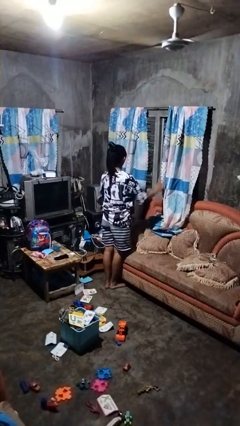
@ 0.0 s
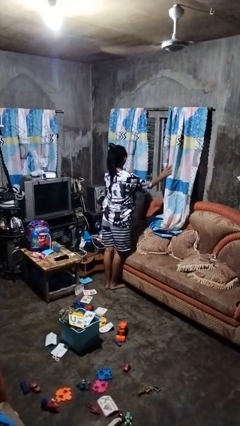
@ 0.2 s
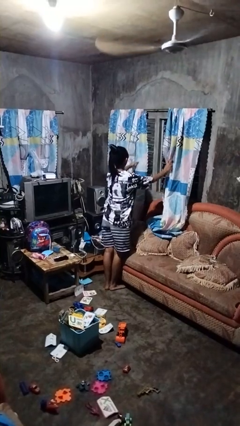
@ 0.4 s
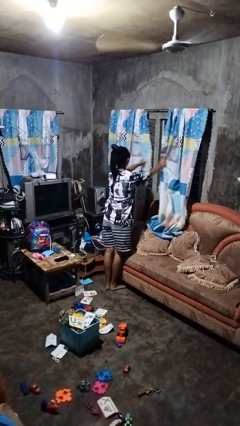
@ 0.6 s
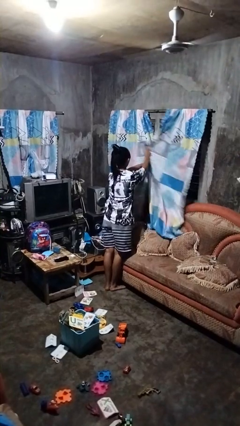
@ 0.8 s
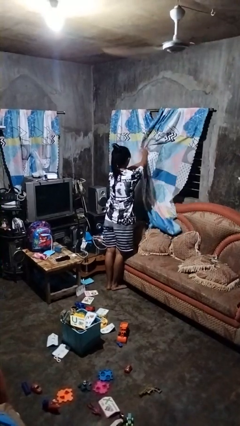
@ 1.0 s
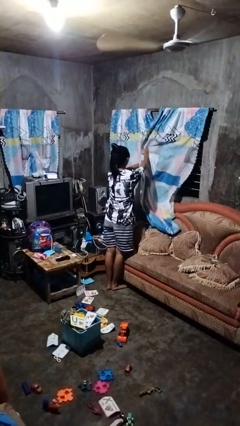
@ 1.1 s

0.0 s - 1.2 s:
person closes curtains

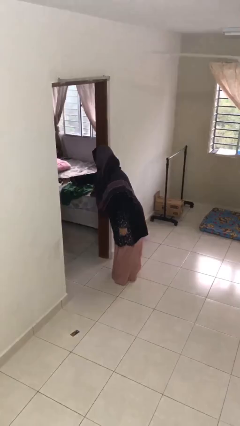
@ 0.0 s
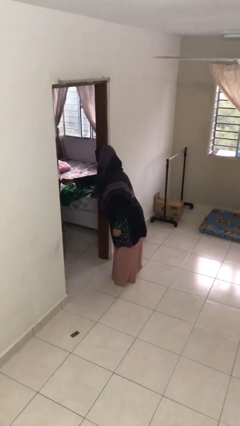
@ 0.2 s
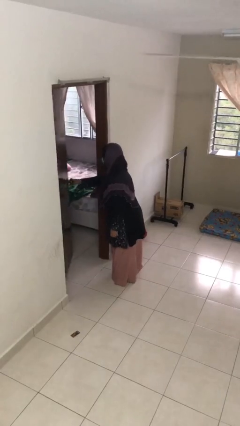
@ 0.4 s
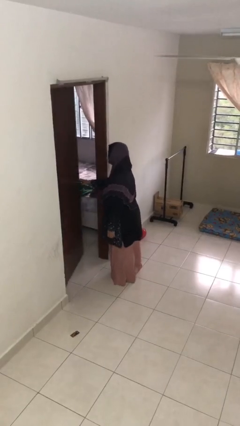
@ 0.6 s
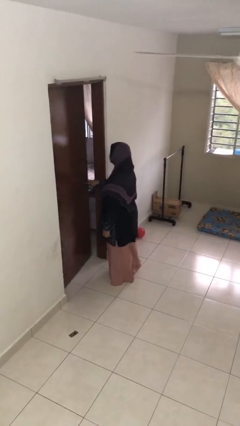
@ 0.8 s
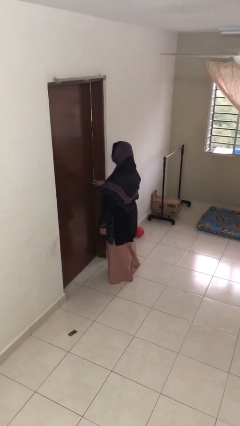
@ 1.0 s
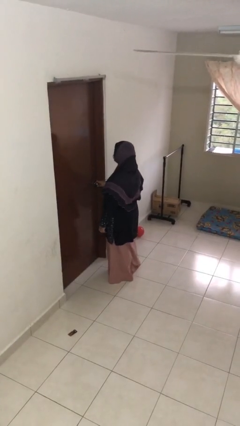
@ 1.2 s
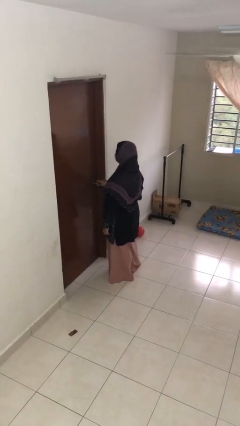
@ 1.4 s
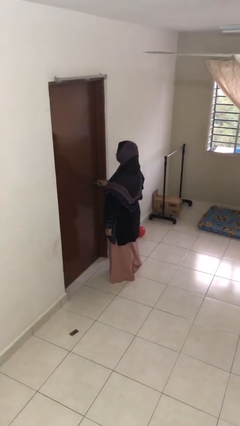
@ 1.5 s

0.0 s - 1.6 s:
person closes facility door

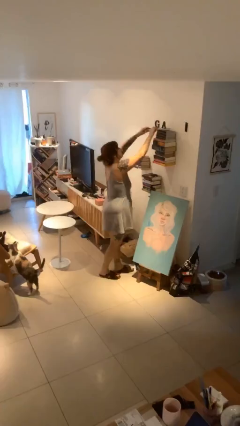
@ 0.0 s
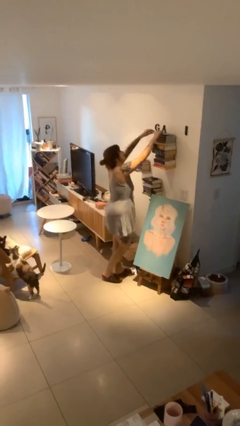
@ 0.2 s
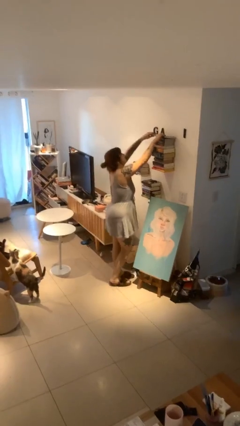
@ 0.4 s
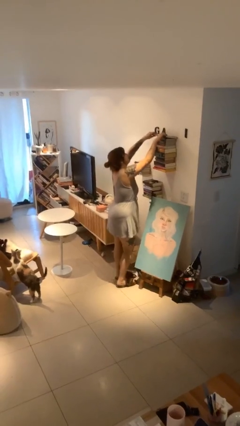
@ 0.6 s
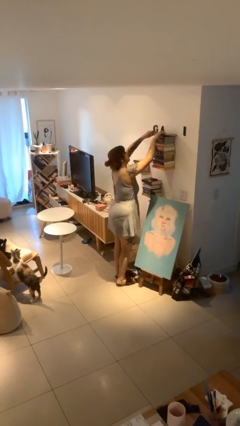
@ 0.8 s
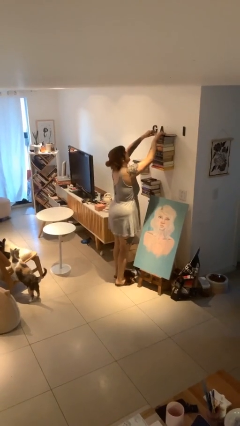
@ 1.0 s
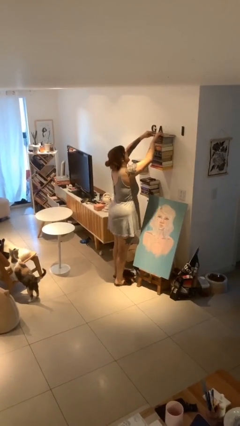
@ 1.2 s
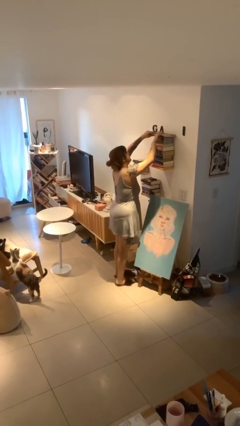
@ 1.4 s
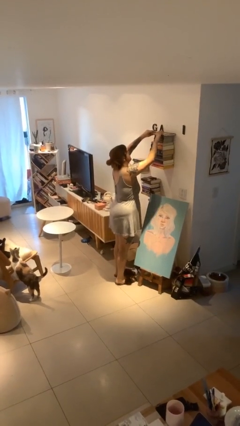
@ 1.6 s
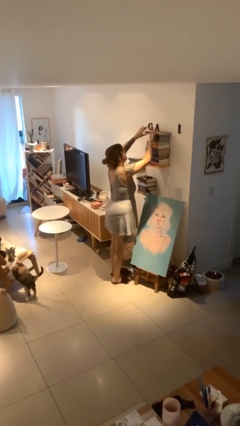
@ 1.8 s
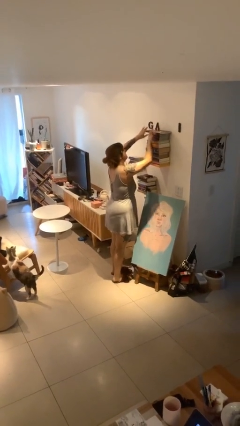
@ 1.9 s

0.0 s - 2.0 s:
person puts down object on shelf

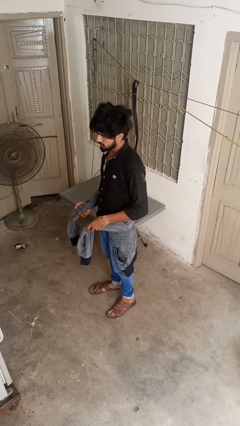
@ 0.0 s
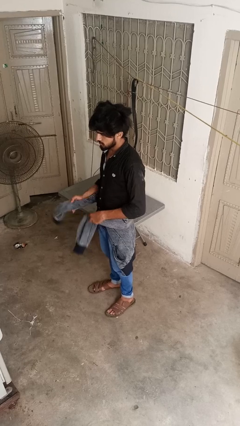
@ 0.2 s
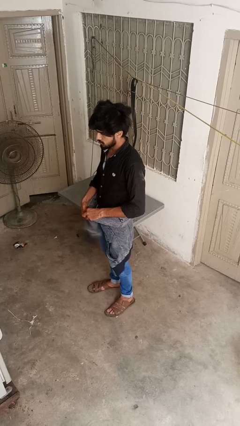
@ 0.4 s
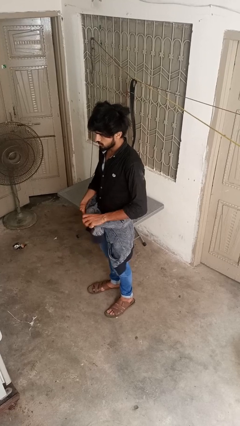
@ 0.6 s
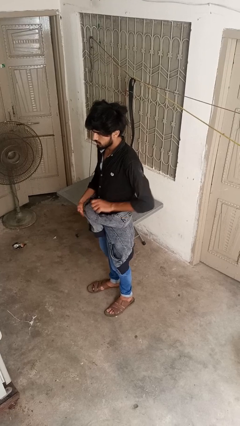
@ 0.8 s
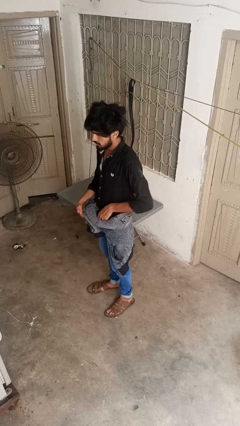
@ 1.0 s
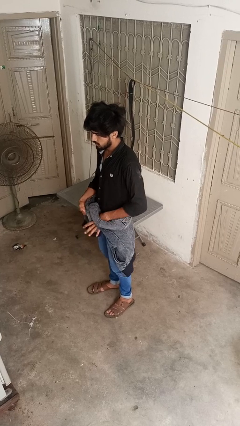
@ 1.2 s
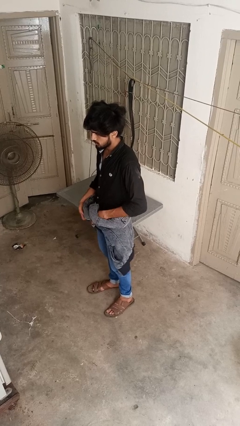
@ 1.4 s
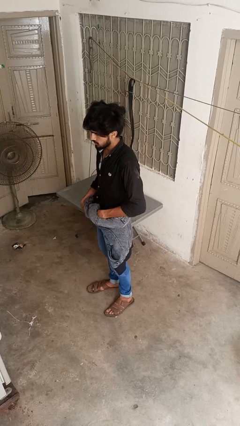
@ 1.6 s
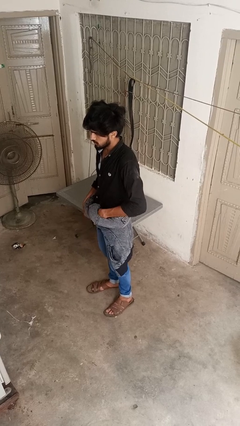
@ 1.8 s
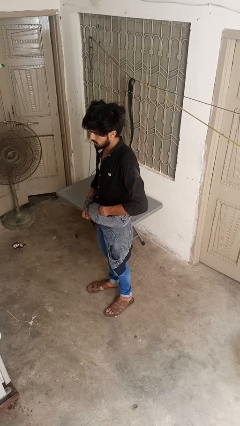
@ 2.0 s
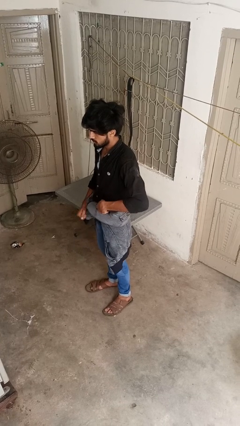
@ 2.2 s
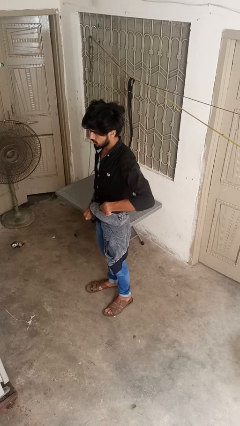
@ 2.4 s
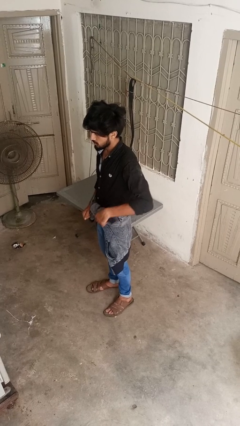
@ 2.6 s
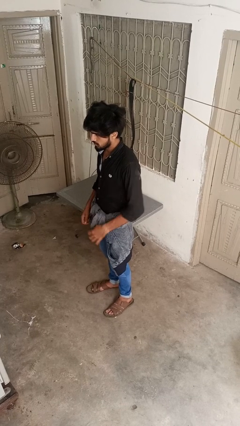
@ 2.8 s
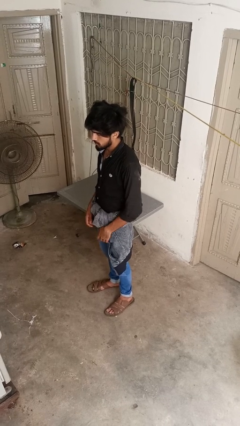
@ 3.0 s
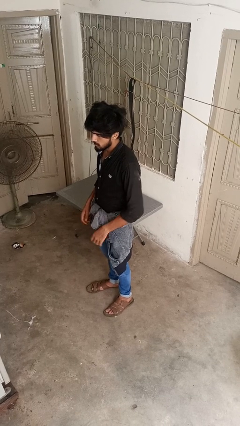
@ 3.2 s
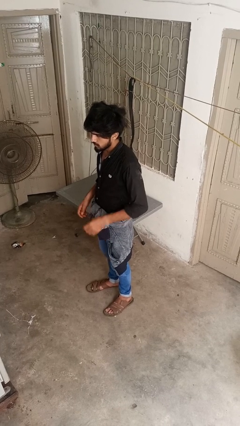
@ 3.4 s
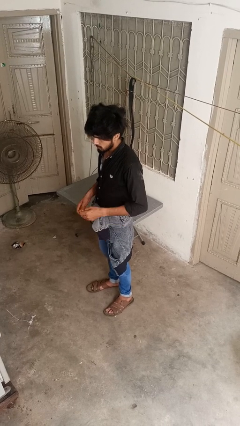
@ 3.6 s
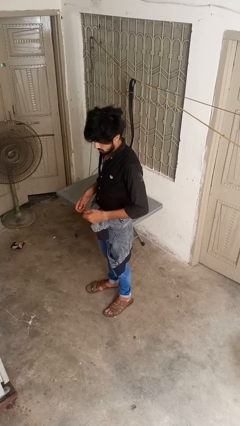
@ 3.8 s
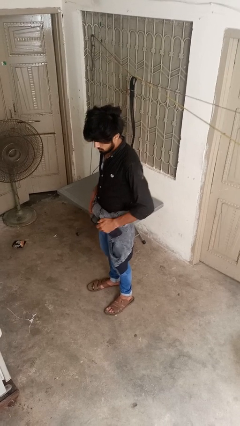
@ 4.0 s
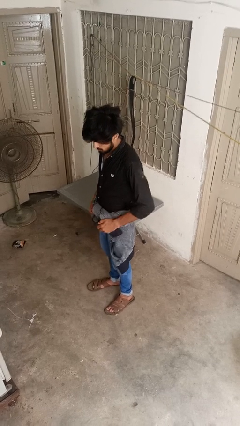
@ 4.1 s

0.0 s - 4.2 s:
person ties jacket around waist

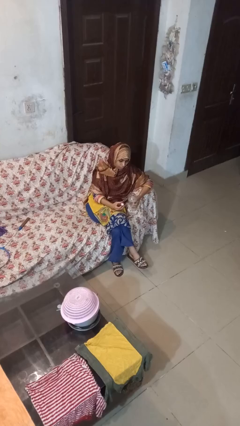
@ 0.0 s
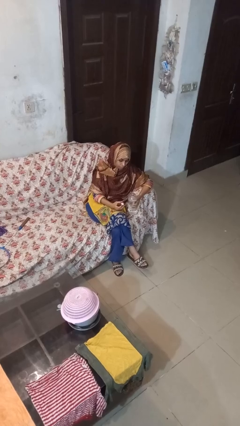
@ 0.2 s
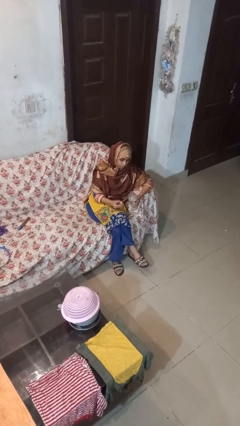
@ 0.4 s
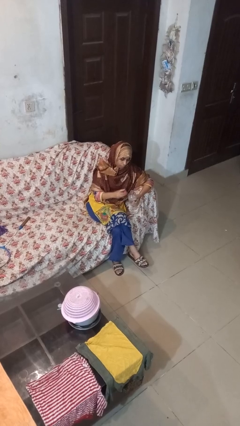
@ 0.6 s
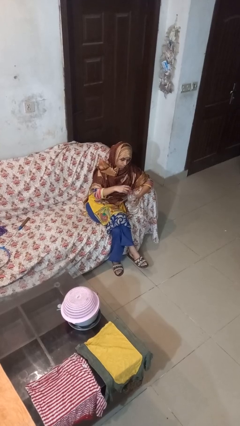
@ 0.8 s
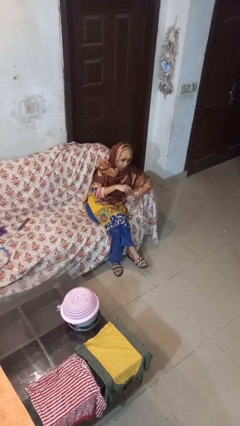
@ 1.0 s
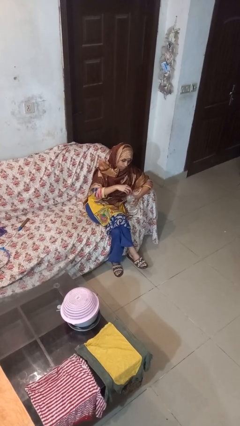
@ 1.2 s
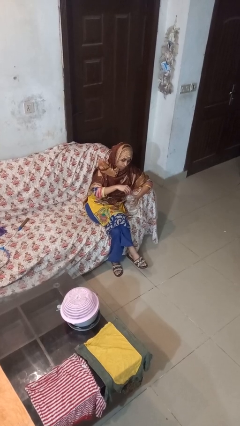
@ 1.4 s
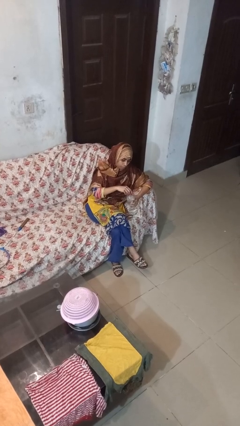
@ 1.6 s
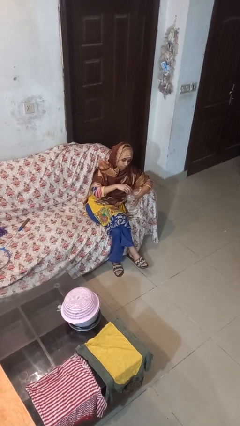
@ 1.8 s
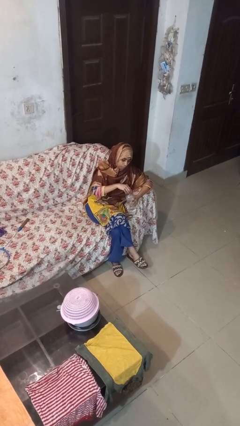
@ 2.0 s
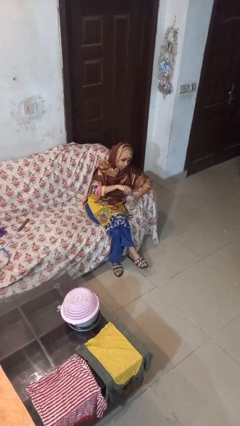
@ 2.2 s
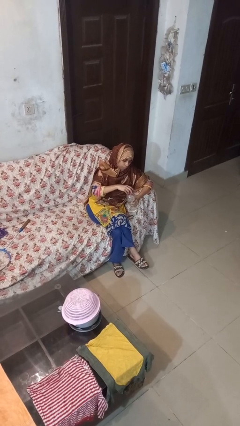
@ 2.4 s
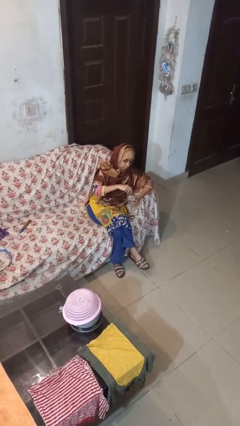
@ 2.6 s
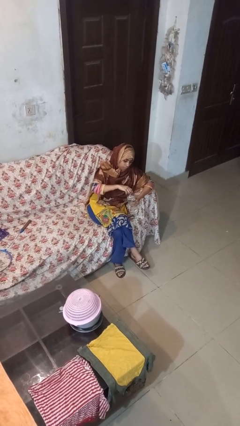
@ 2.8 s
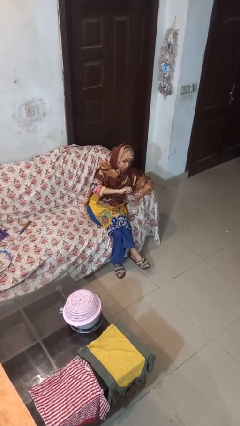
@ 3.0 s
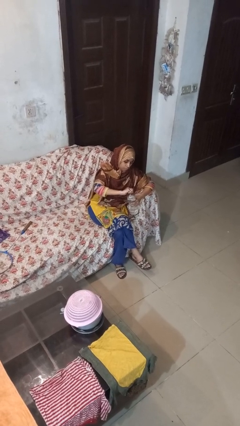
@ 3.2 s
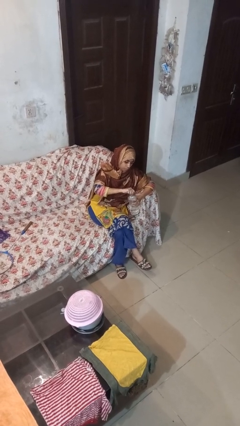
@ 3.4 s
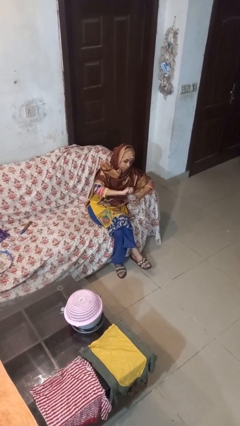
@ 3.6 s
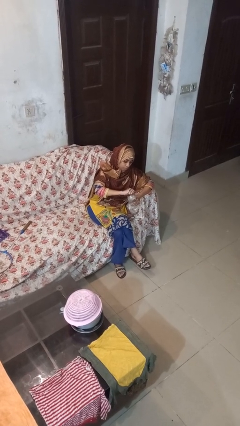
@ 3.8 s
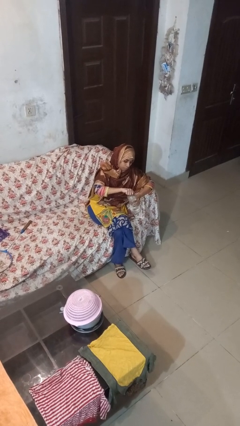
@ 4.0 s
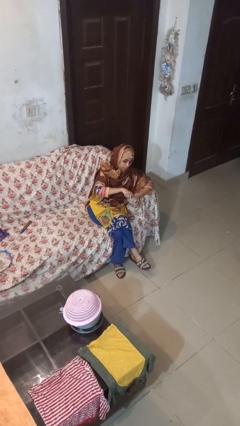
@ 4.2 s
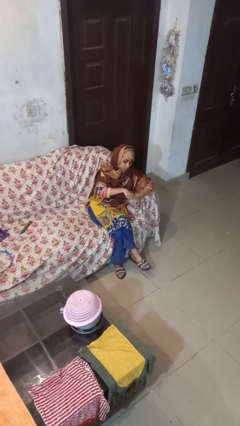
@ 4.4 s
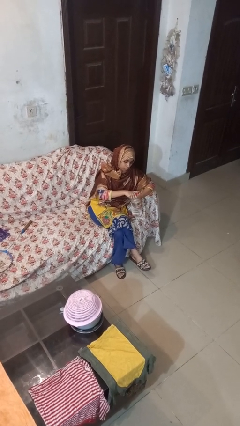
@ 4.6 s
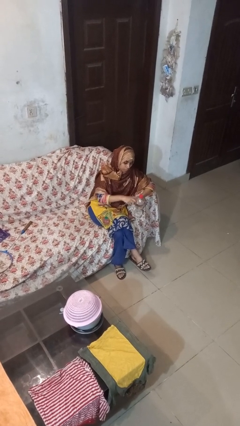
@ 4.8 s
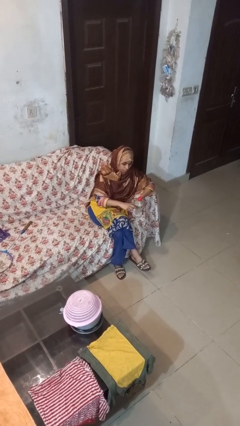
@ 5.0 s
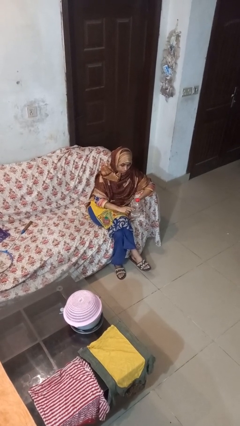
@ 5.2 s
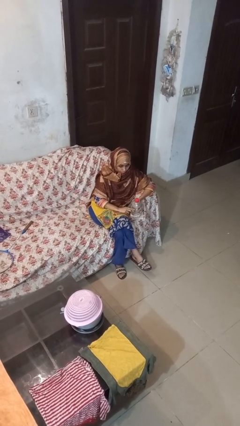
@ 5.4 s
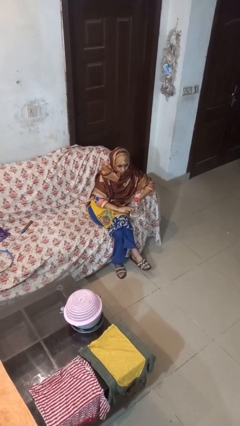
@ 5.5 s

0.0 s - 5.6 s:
person screws lid to bottle

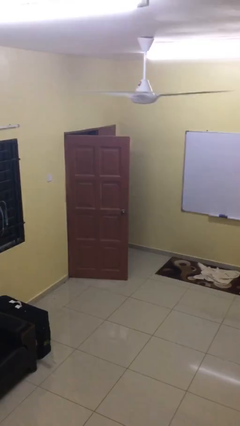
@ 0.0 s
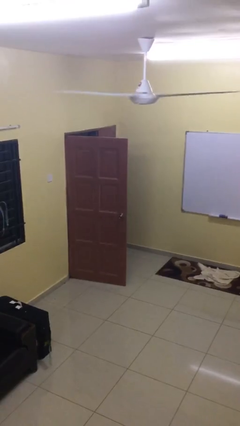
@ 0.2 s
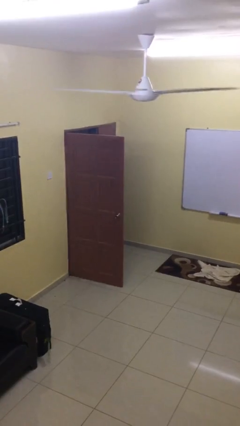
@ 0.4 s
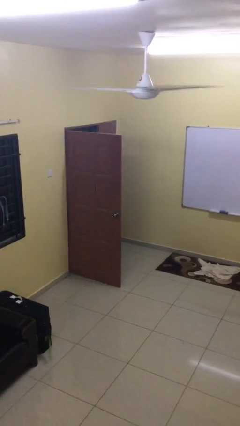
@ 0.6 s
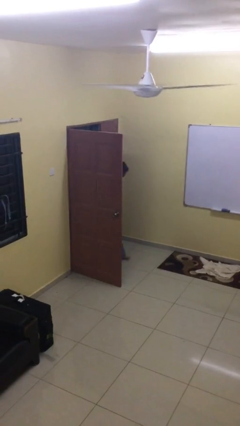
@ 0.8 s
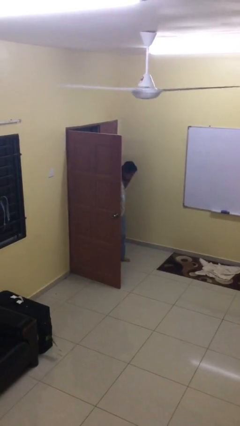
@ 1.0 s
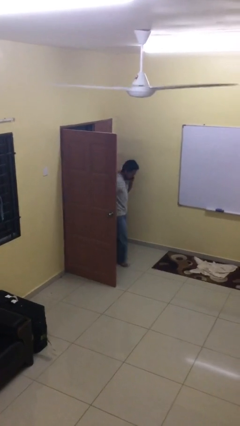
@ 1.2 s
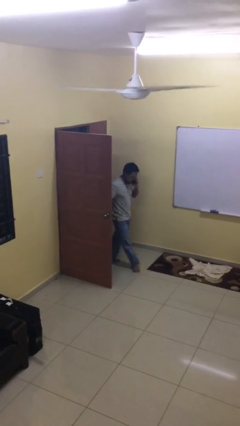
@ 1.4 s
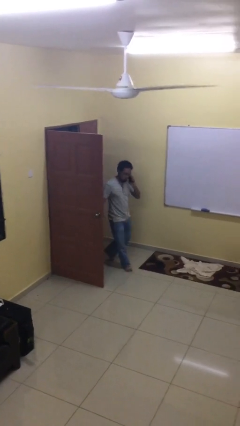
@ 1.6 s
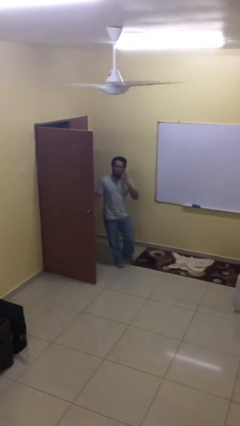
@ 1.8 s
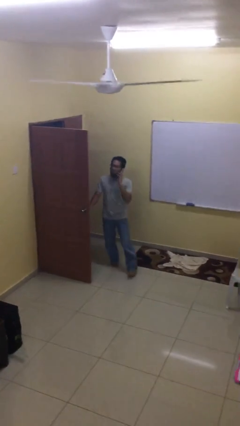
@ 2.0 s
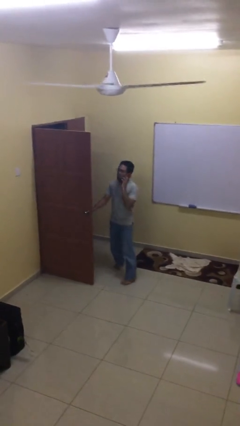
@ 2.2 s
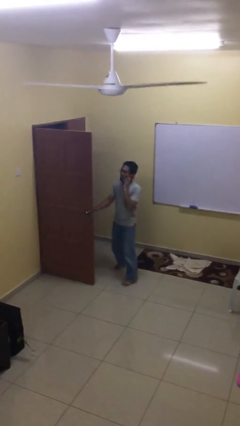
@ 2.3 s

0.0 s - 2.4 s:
person enters scene through structure
